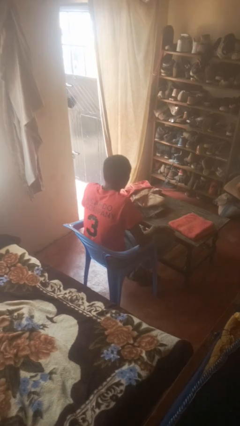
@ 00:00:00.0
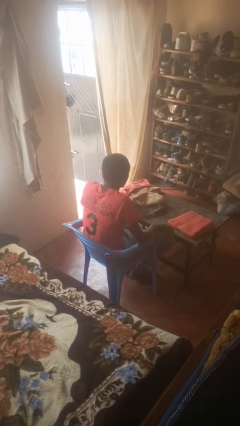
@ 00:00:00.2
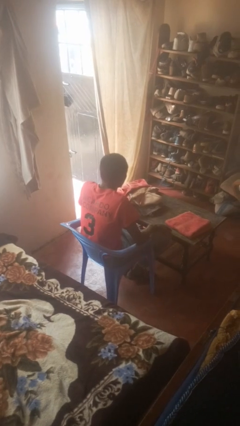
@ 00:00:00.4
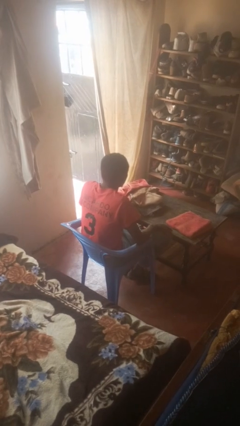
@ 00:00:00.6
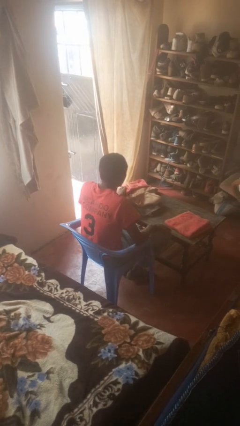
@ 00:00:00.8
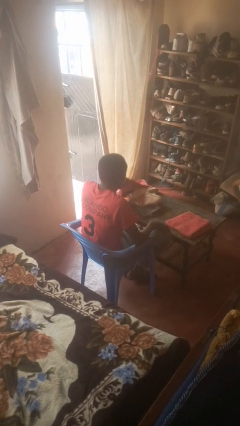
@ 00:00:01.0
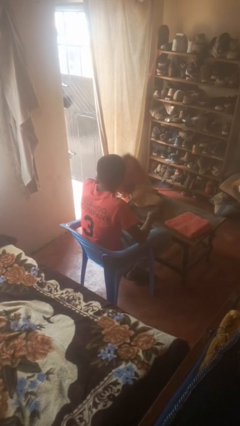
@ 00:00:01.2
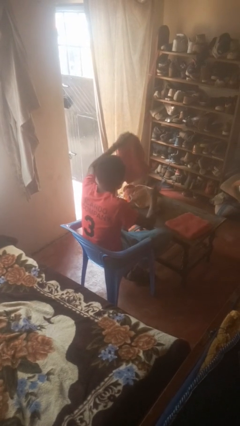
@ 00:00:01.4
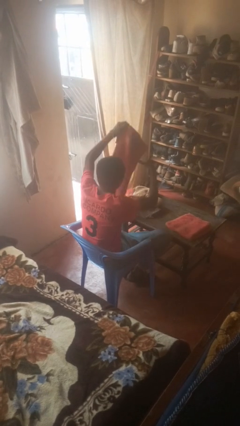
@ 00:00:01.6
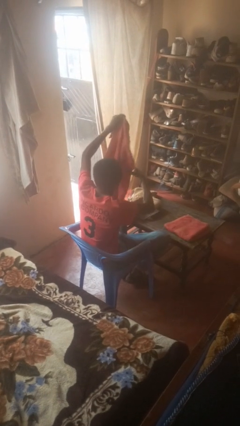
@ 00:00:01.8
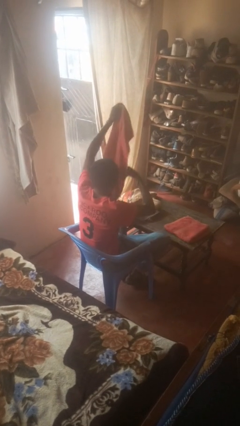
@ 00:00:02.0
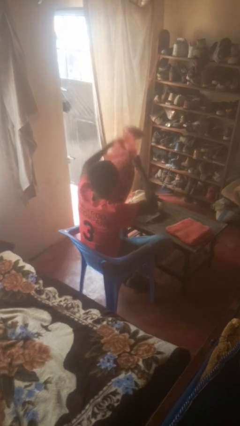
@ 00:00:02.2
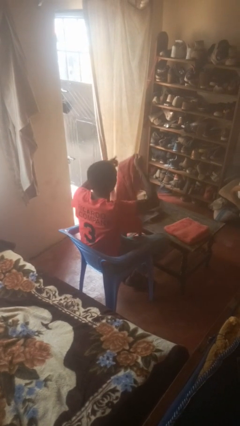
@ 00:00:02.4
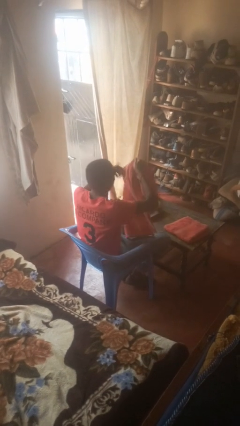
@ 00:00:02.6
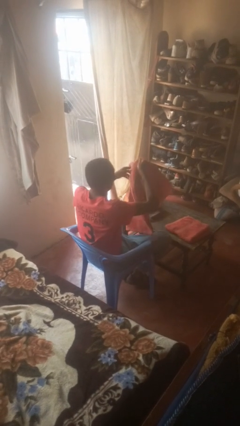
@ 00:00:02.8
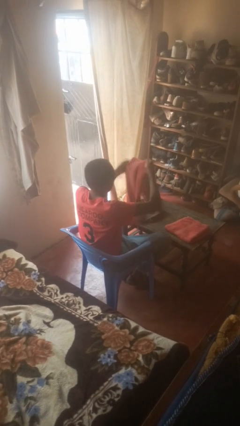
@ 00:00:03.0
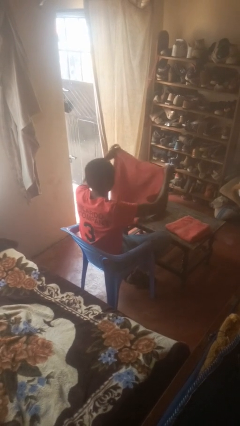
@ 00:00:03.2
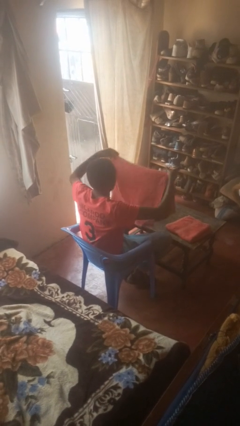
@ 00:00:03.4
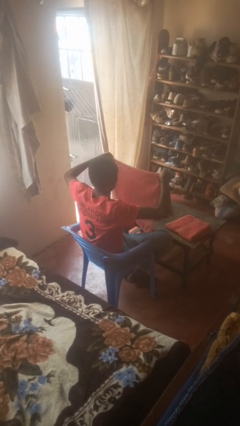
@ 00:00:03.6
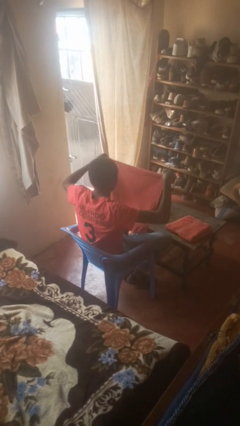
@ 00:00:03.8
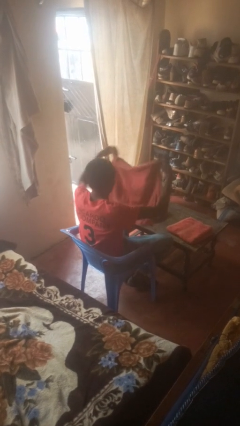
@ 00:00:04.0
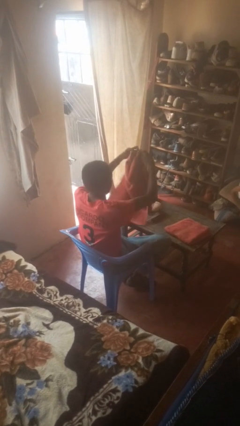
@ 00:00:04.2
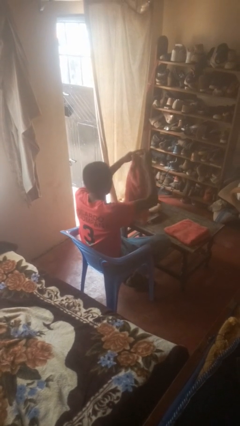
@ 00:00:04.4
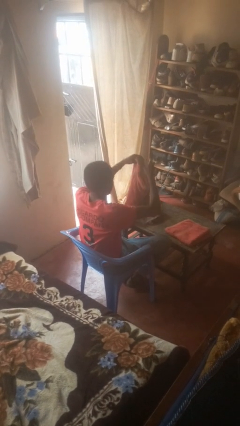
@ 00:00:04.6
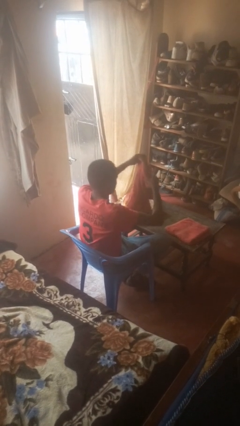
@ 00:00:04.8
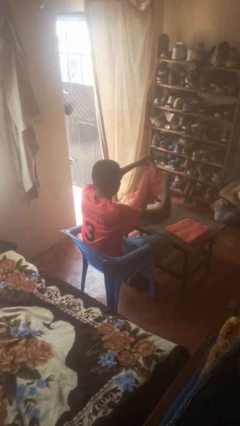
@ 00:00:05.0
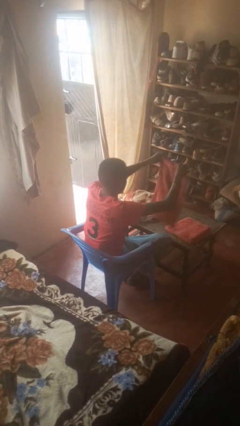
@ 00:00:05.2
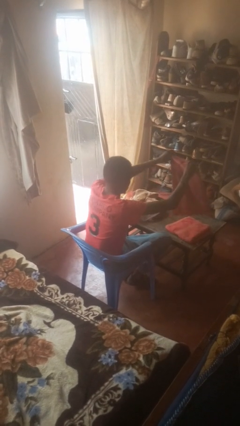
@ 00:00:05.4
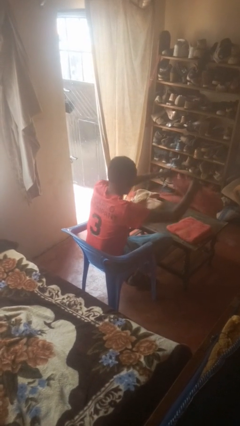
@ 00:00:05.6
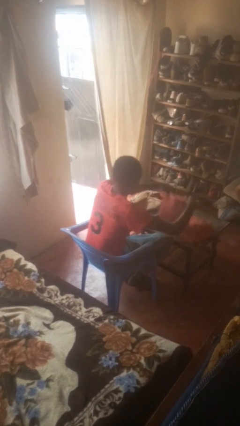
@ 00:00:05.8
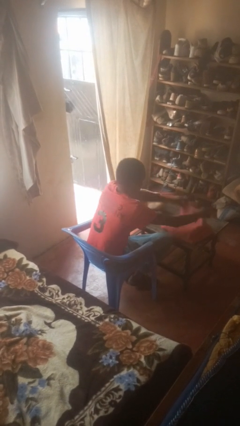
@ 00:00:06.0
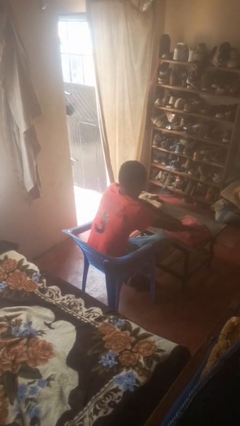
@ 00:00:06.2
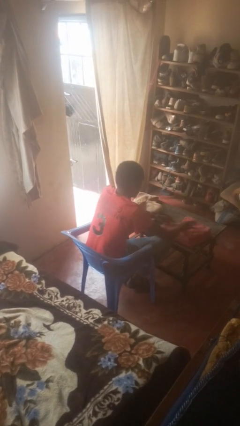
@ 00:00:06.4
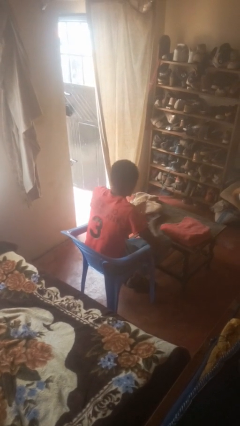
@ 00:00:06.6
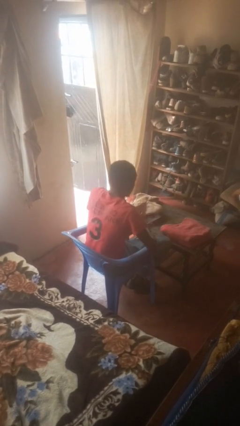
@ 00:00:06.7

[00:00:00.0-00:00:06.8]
person folds towel

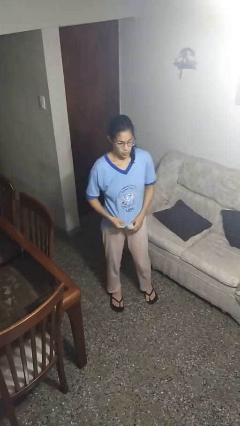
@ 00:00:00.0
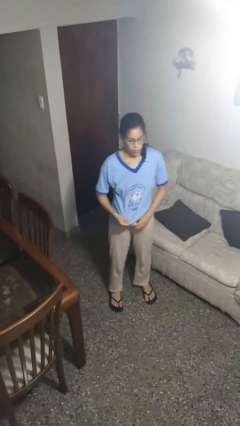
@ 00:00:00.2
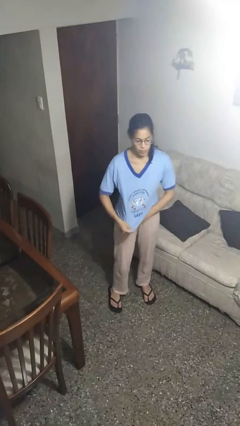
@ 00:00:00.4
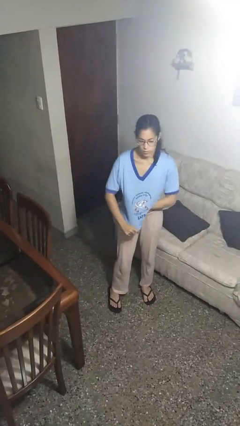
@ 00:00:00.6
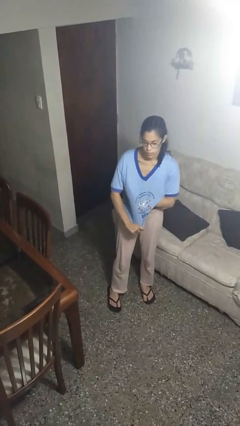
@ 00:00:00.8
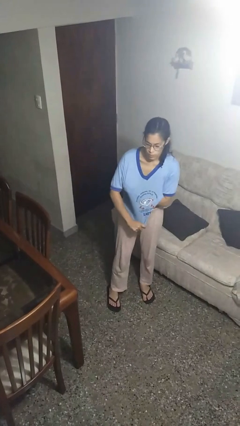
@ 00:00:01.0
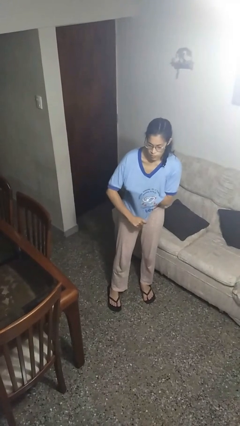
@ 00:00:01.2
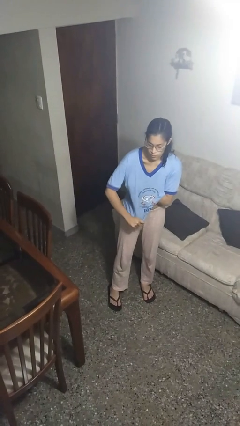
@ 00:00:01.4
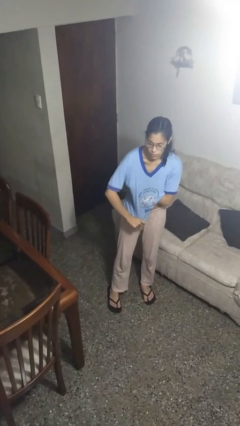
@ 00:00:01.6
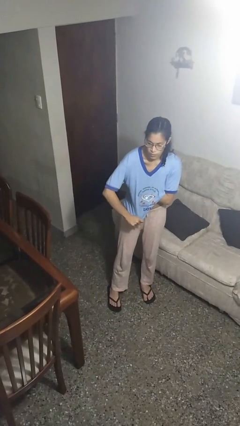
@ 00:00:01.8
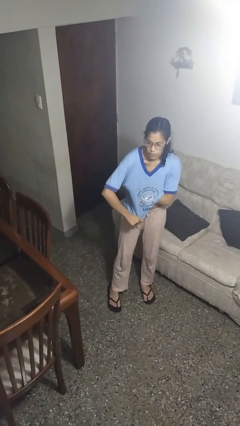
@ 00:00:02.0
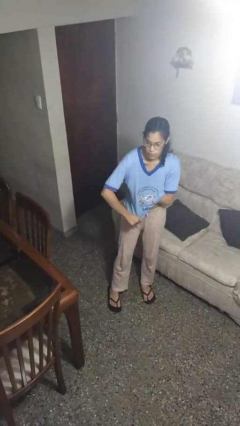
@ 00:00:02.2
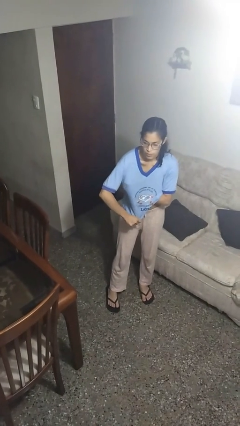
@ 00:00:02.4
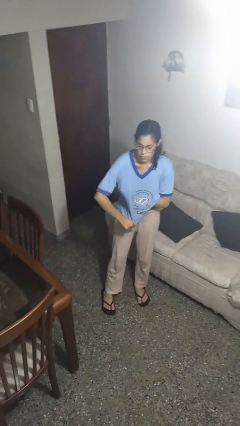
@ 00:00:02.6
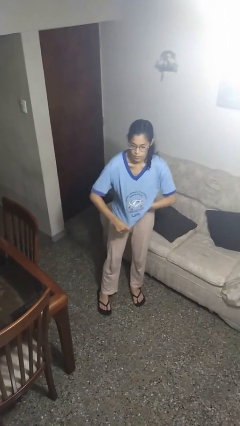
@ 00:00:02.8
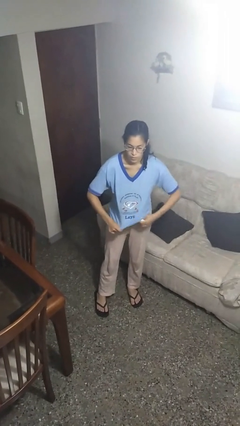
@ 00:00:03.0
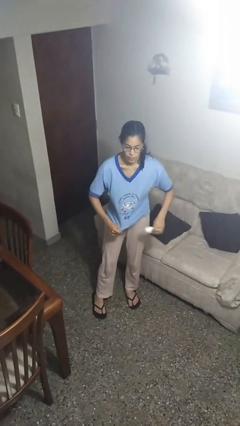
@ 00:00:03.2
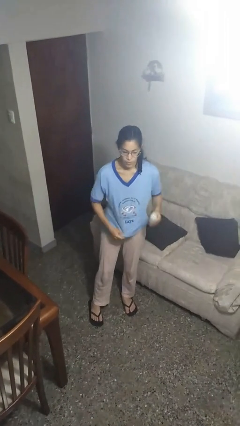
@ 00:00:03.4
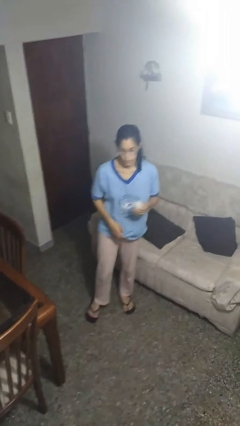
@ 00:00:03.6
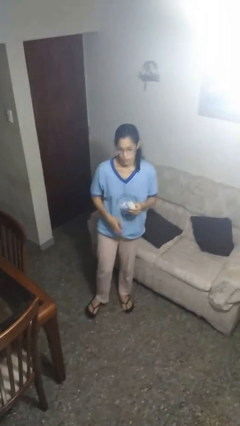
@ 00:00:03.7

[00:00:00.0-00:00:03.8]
person applies deodorant

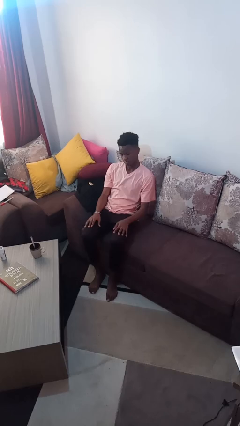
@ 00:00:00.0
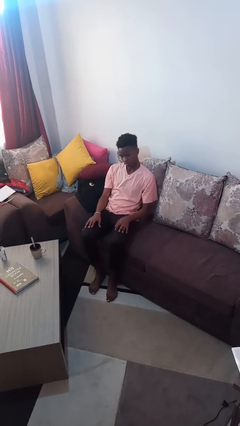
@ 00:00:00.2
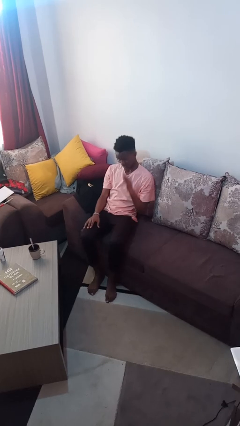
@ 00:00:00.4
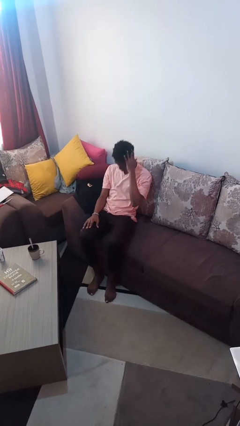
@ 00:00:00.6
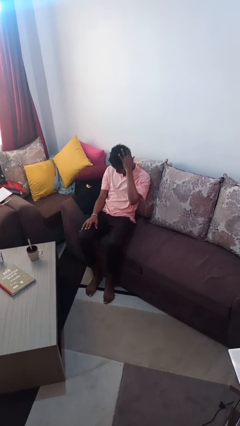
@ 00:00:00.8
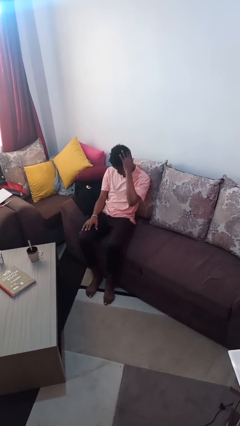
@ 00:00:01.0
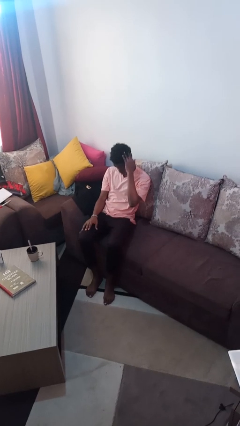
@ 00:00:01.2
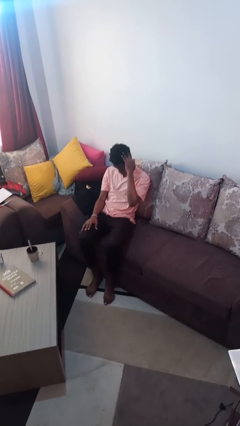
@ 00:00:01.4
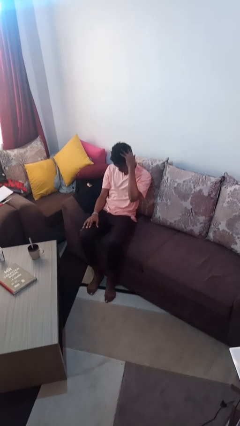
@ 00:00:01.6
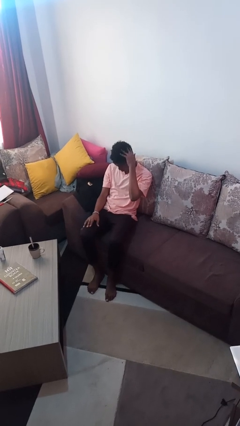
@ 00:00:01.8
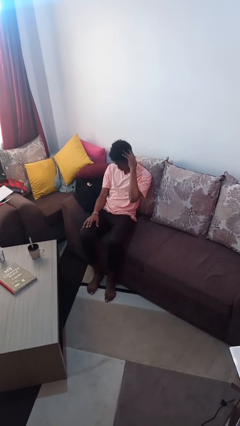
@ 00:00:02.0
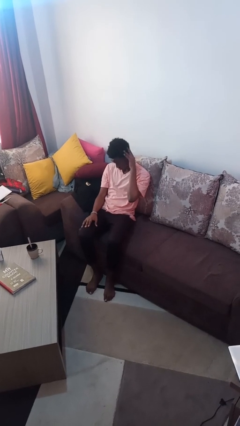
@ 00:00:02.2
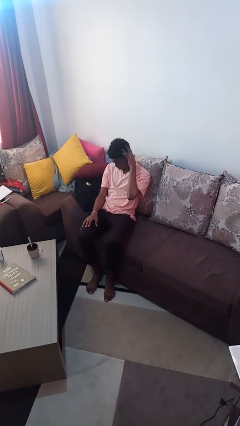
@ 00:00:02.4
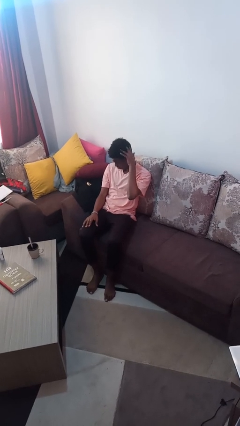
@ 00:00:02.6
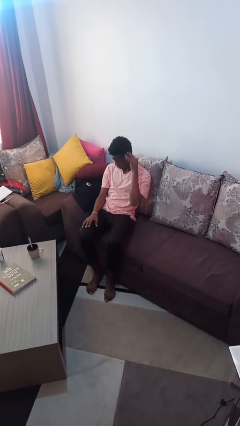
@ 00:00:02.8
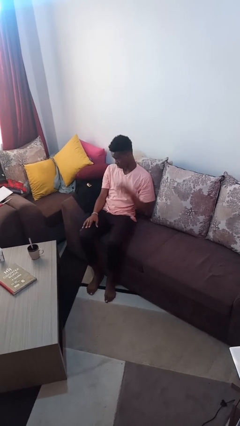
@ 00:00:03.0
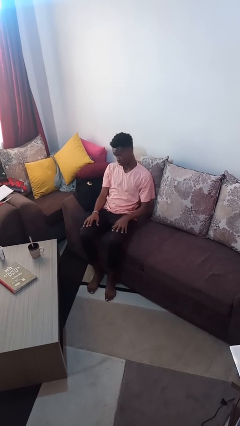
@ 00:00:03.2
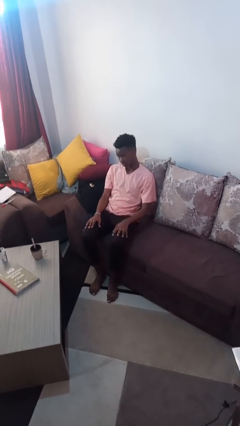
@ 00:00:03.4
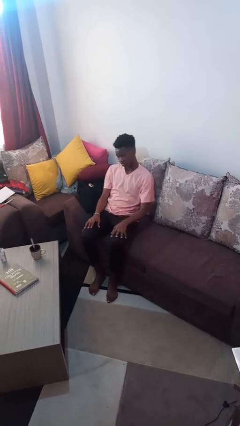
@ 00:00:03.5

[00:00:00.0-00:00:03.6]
person strokes hair

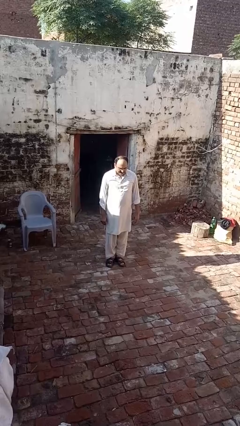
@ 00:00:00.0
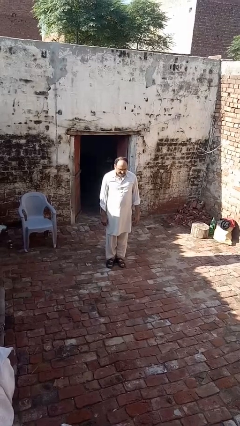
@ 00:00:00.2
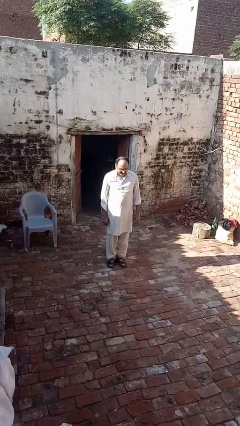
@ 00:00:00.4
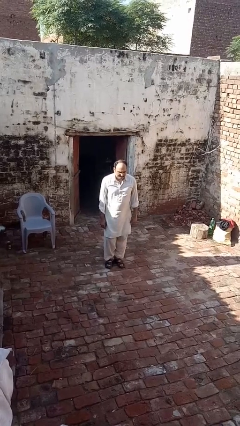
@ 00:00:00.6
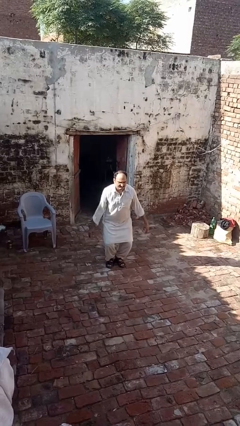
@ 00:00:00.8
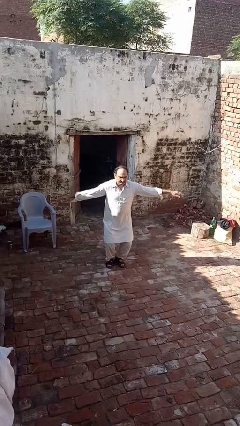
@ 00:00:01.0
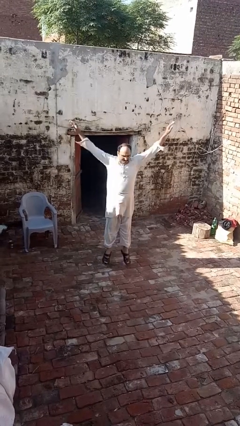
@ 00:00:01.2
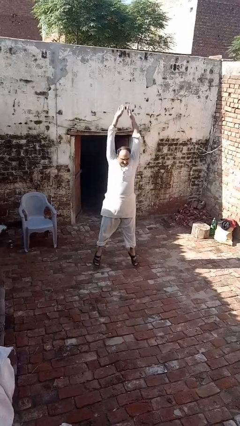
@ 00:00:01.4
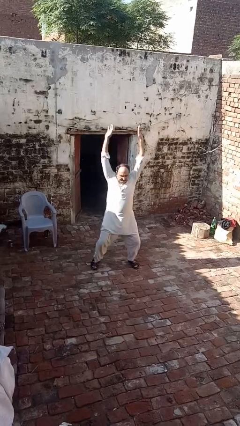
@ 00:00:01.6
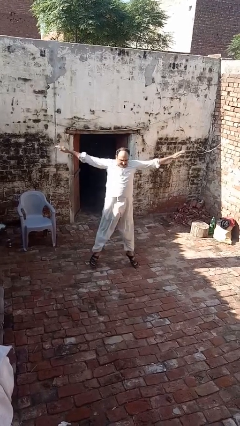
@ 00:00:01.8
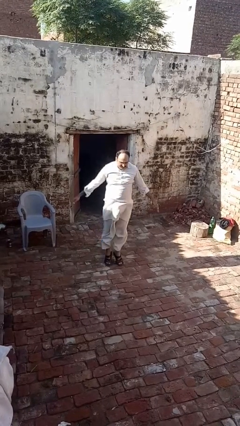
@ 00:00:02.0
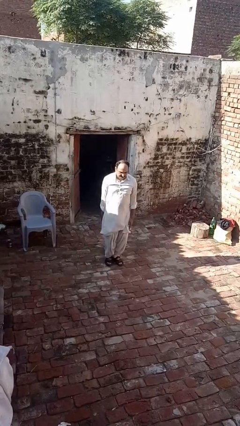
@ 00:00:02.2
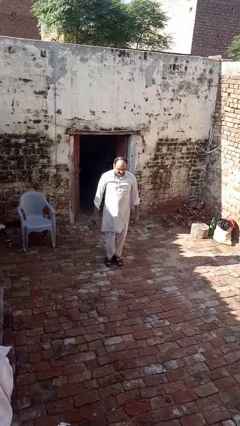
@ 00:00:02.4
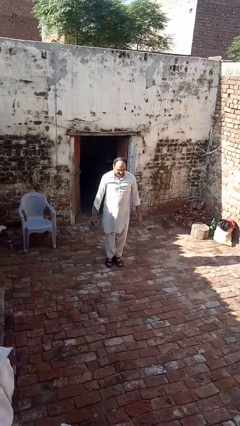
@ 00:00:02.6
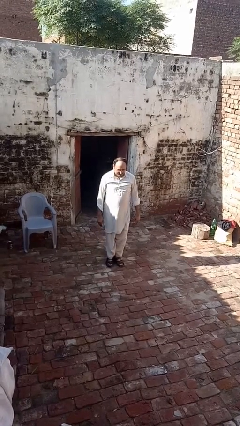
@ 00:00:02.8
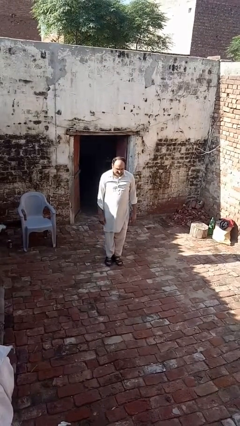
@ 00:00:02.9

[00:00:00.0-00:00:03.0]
person exercises with jumping jacks

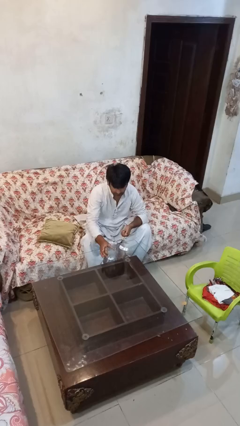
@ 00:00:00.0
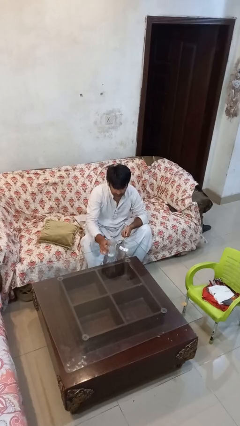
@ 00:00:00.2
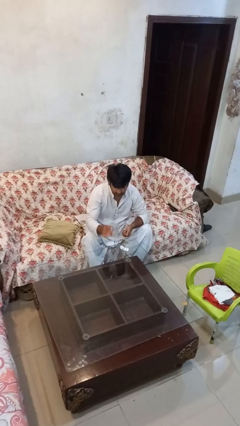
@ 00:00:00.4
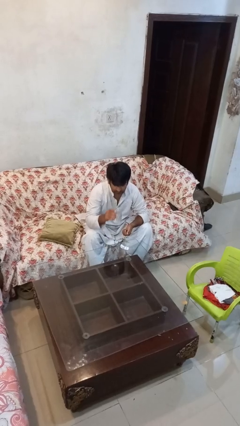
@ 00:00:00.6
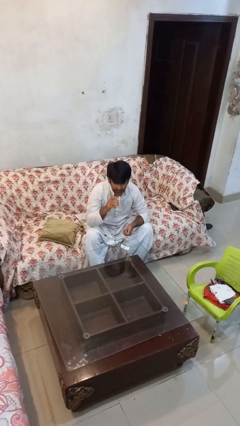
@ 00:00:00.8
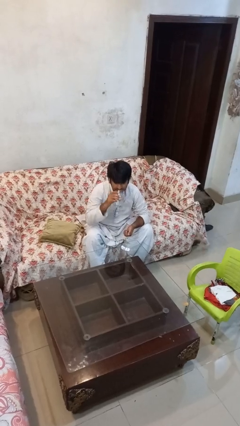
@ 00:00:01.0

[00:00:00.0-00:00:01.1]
person drinks from cup
